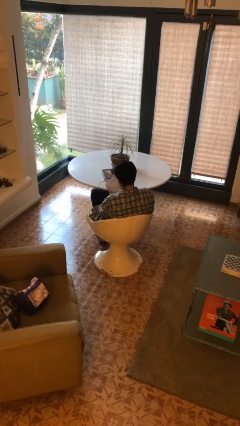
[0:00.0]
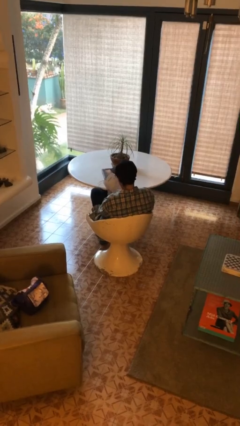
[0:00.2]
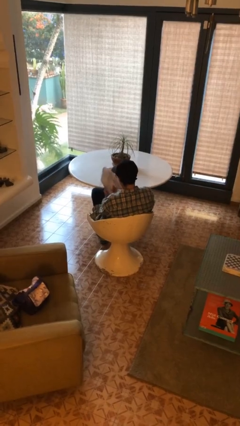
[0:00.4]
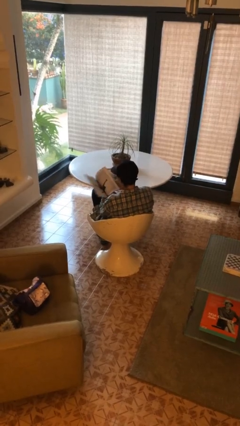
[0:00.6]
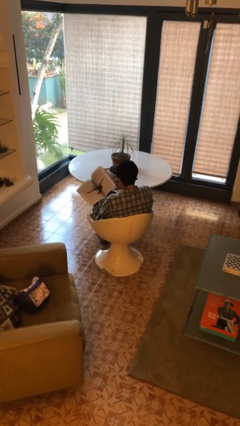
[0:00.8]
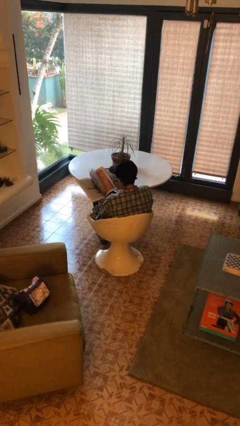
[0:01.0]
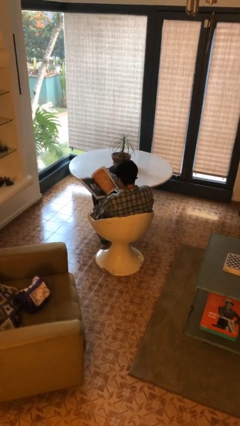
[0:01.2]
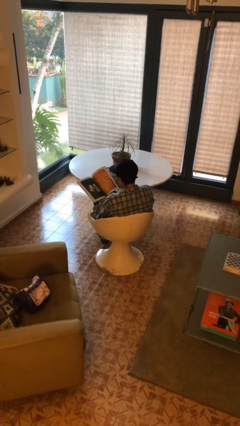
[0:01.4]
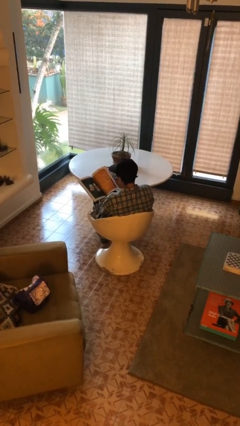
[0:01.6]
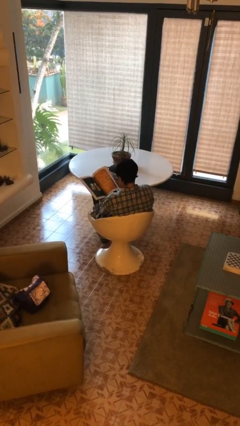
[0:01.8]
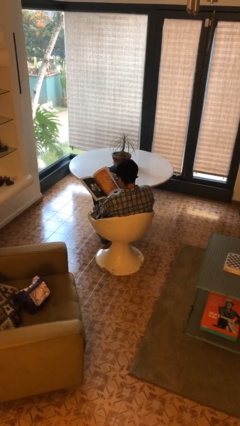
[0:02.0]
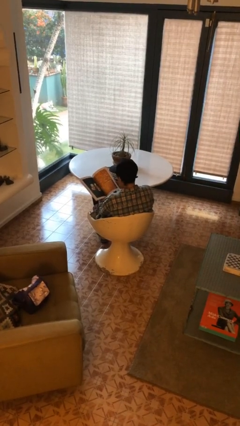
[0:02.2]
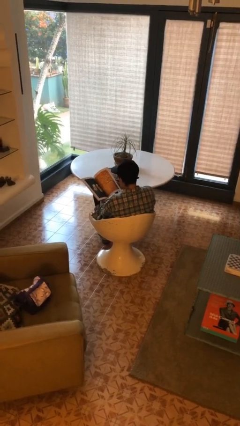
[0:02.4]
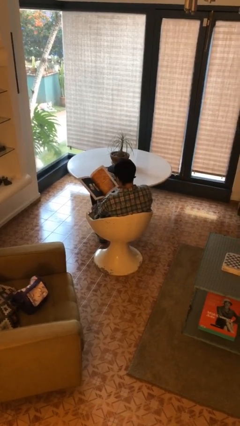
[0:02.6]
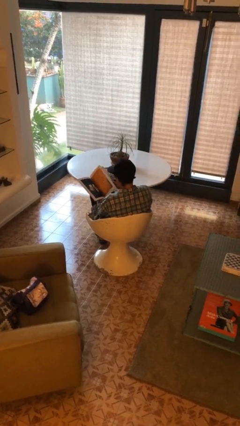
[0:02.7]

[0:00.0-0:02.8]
person reads magazine

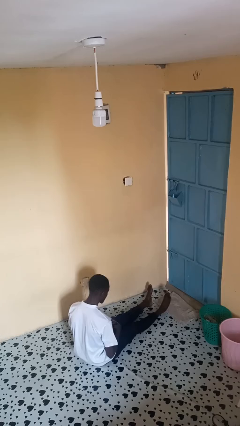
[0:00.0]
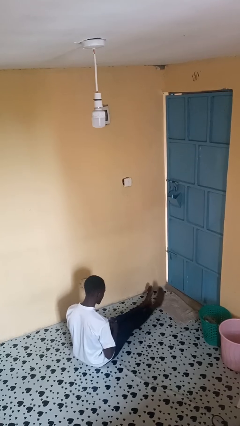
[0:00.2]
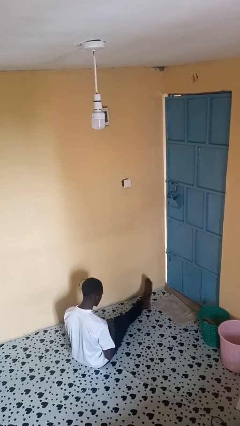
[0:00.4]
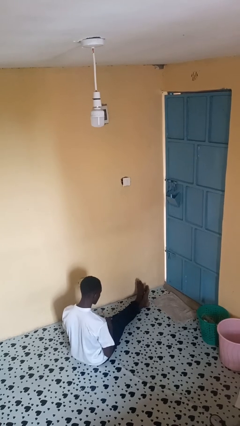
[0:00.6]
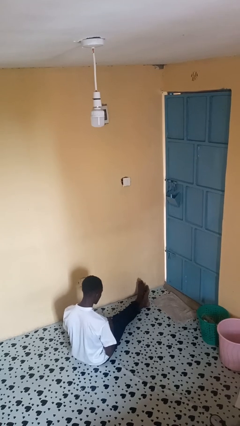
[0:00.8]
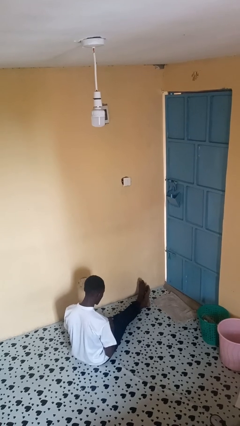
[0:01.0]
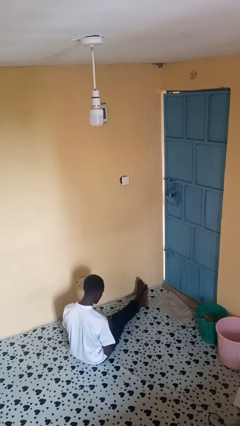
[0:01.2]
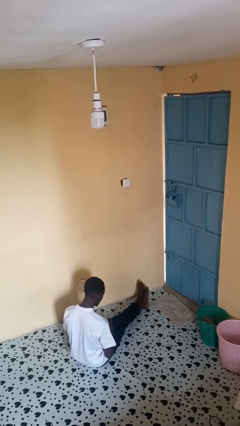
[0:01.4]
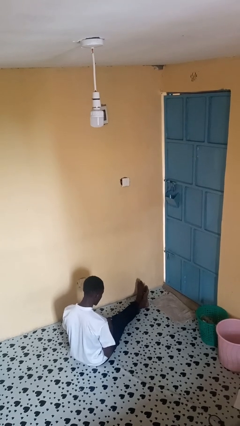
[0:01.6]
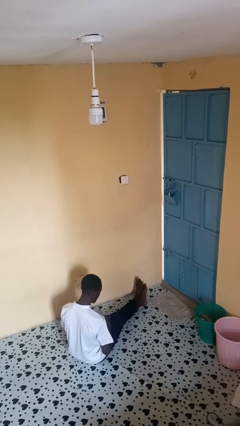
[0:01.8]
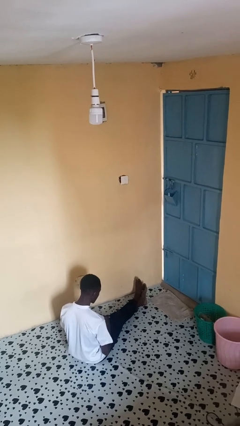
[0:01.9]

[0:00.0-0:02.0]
person crosses legs

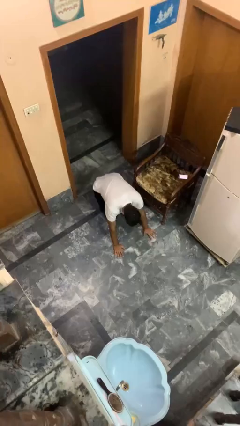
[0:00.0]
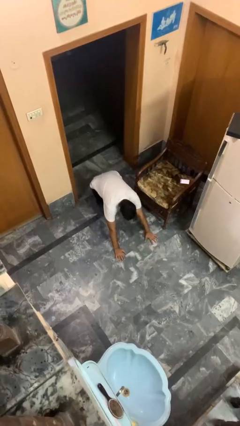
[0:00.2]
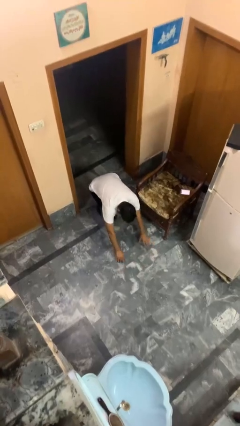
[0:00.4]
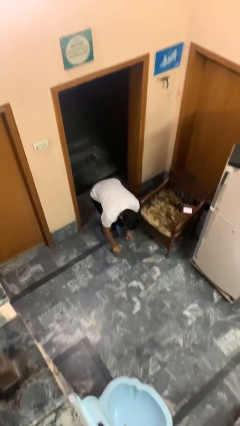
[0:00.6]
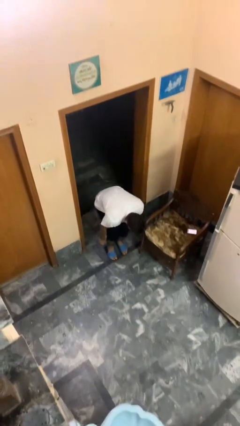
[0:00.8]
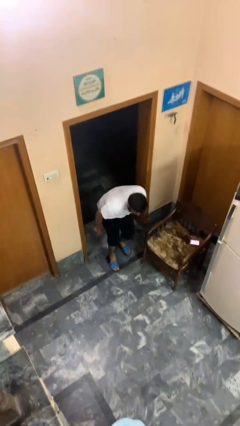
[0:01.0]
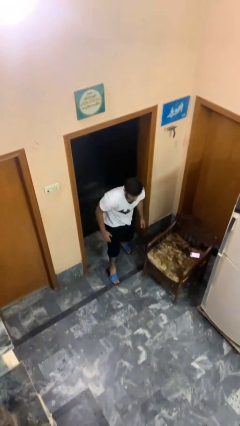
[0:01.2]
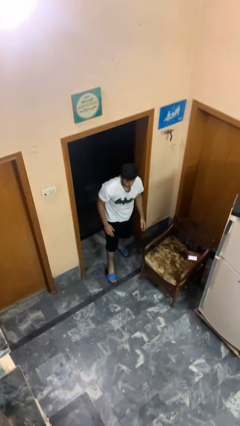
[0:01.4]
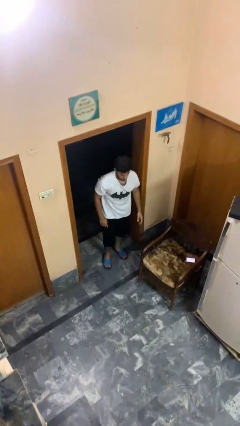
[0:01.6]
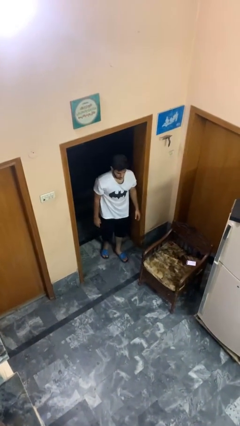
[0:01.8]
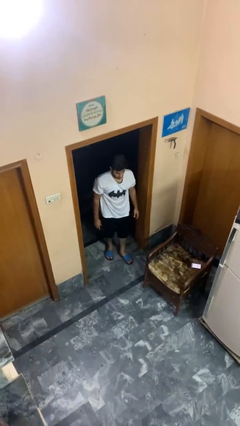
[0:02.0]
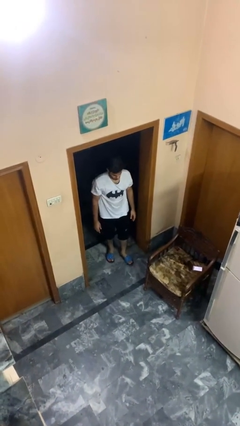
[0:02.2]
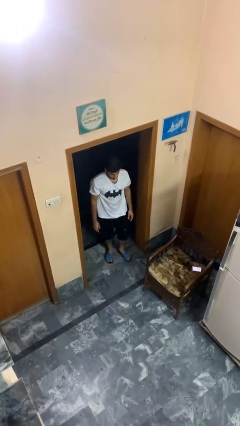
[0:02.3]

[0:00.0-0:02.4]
person stands up from floor

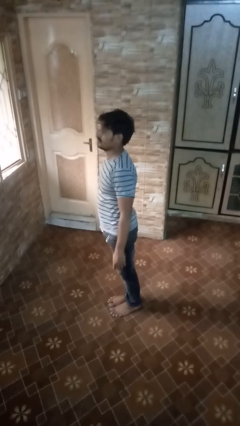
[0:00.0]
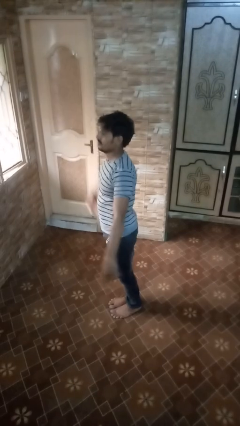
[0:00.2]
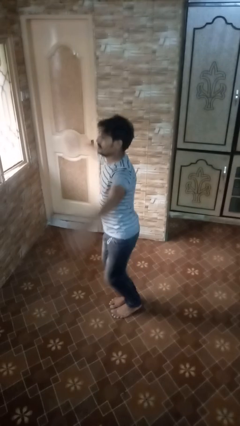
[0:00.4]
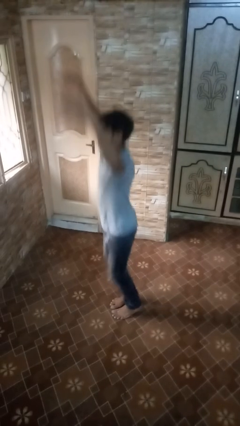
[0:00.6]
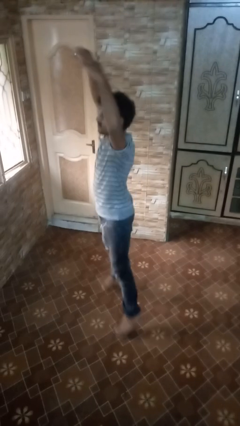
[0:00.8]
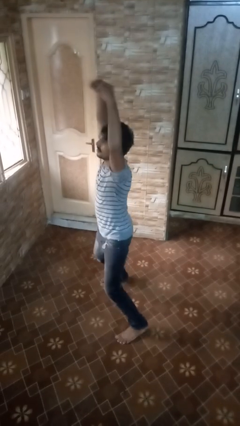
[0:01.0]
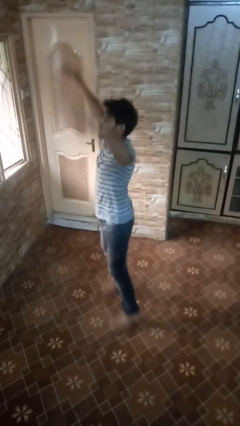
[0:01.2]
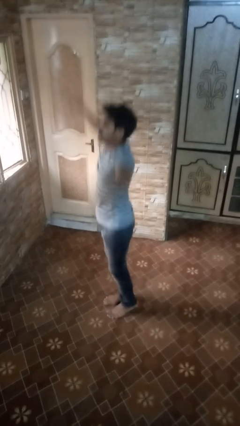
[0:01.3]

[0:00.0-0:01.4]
person exercises with jumping jacks

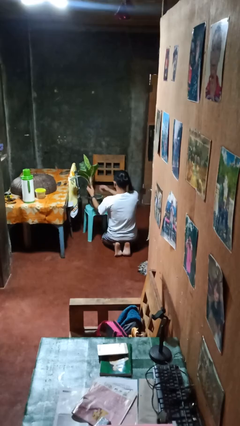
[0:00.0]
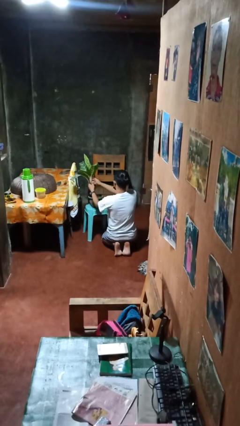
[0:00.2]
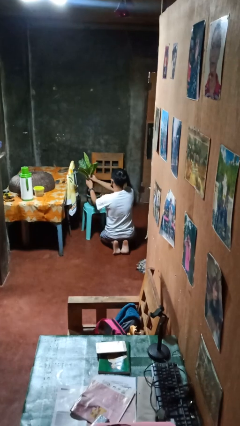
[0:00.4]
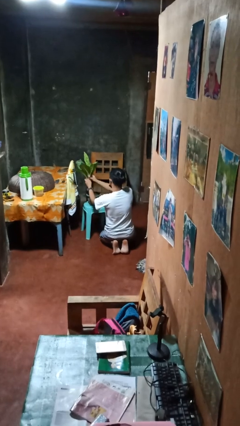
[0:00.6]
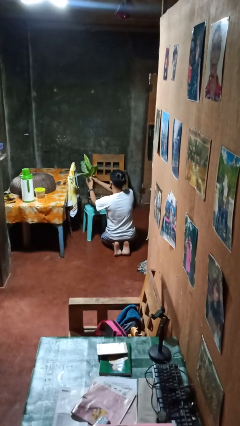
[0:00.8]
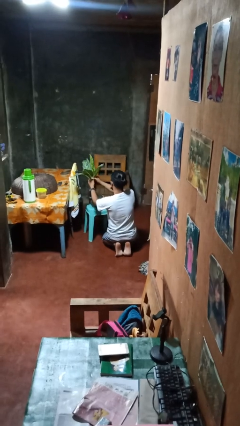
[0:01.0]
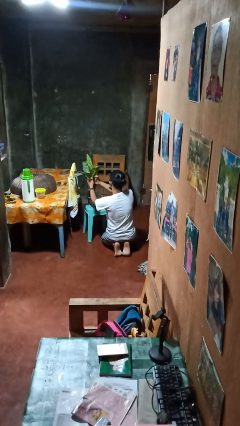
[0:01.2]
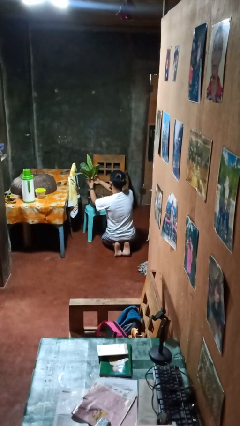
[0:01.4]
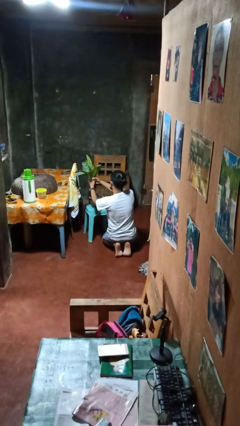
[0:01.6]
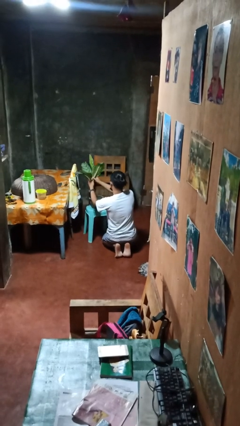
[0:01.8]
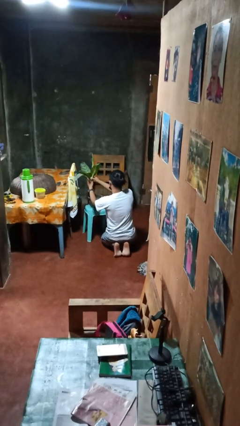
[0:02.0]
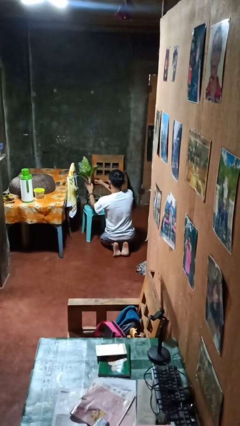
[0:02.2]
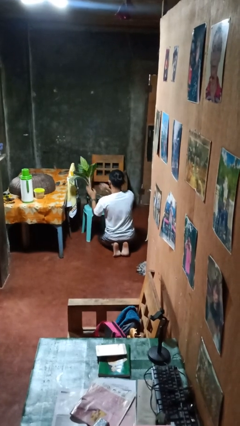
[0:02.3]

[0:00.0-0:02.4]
person arranges flowers in vase

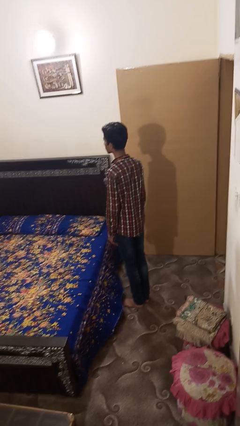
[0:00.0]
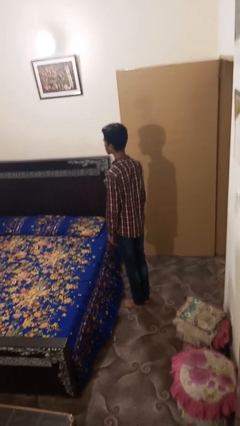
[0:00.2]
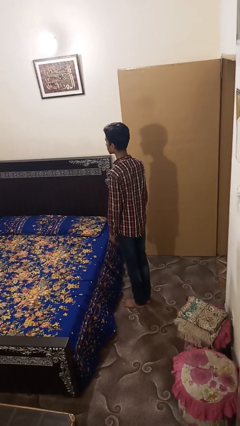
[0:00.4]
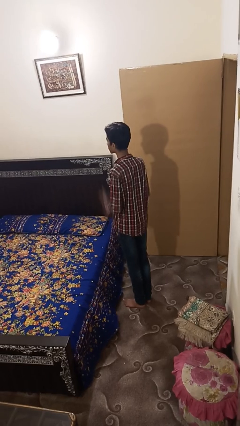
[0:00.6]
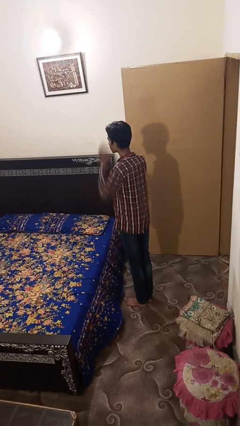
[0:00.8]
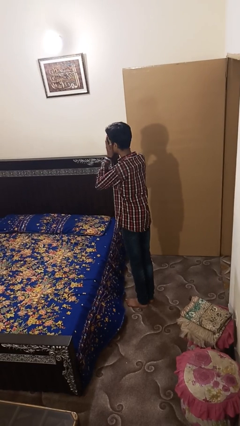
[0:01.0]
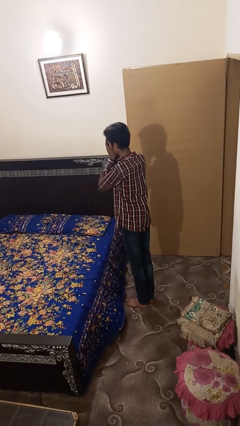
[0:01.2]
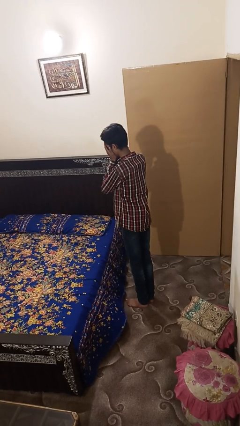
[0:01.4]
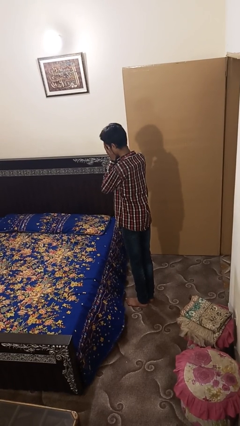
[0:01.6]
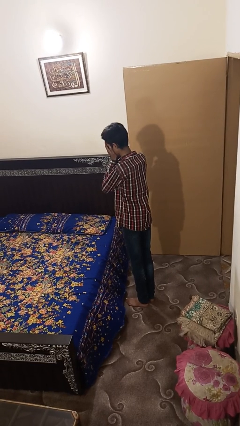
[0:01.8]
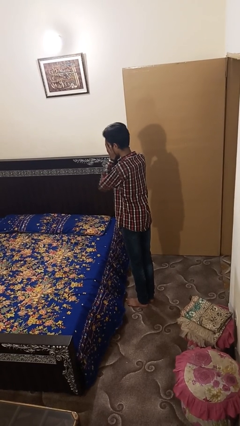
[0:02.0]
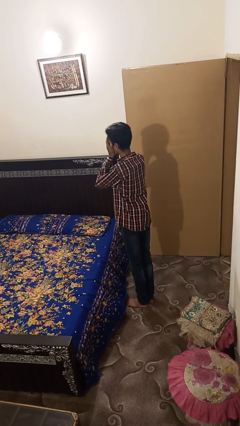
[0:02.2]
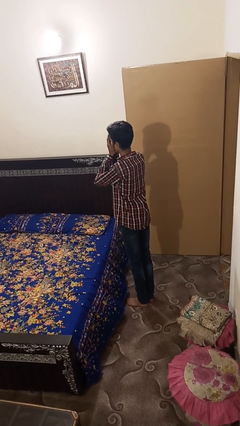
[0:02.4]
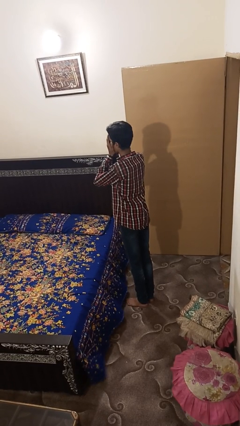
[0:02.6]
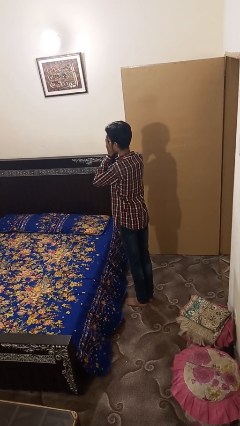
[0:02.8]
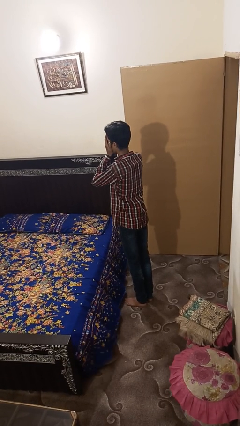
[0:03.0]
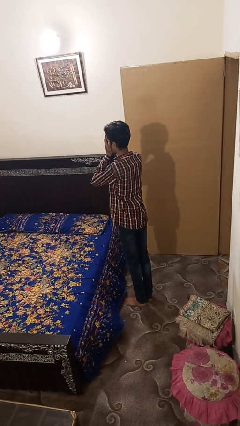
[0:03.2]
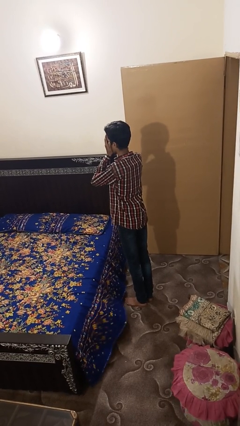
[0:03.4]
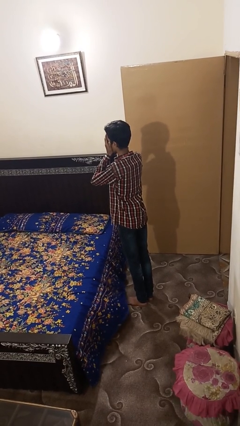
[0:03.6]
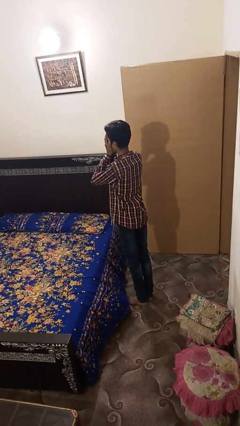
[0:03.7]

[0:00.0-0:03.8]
person covers face with hands

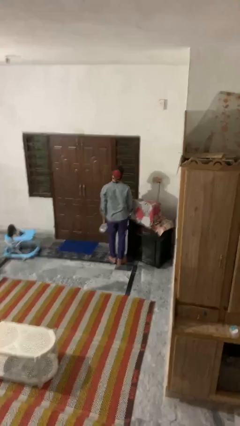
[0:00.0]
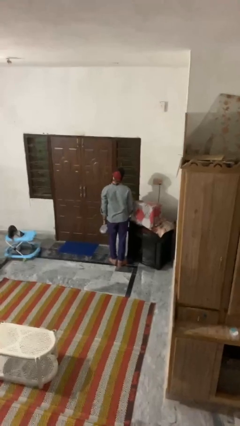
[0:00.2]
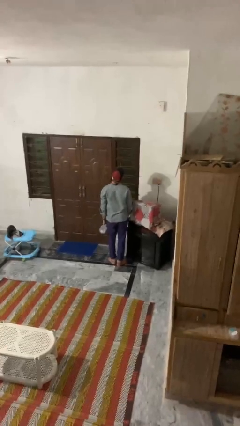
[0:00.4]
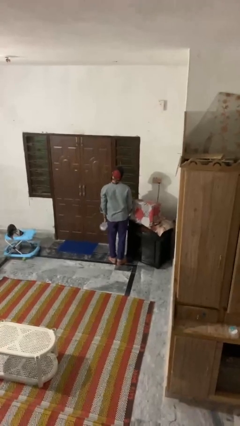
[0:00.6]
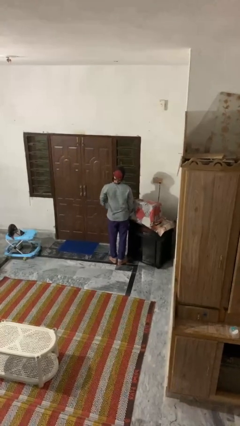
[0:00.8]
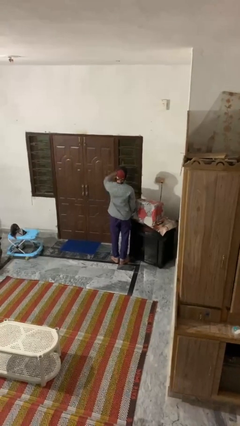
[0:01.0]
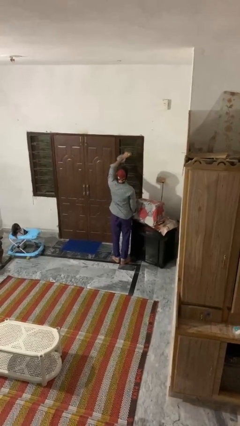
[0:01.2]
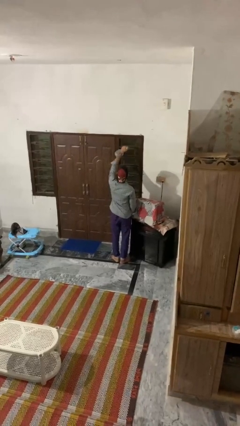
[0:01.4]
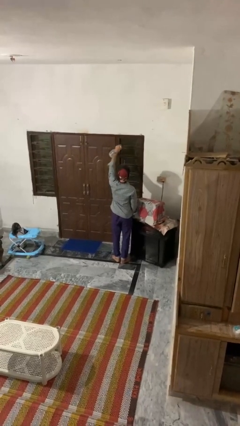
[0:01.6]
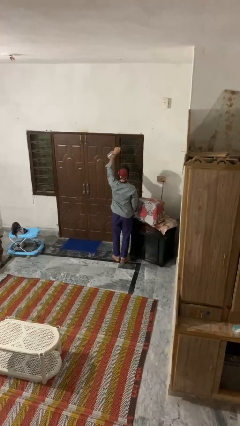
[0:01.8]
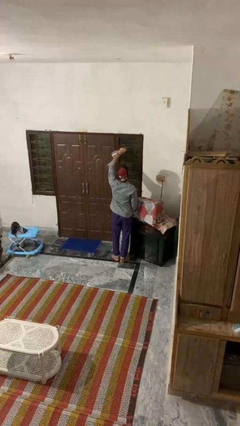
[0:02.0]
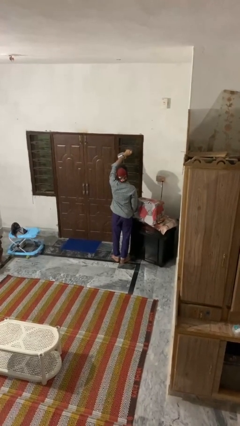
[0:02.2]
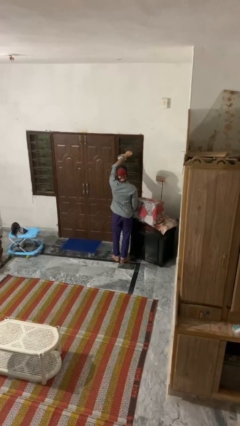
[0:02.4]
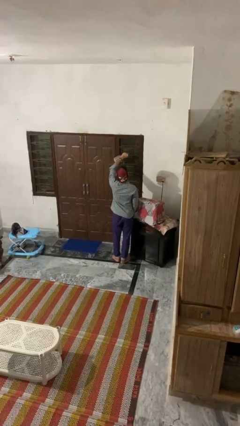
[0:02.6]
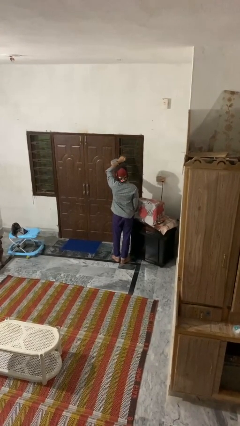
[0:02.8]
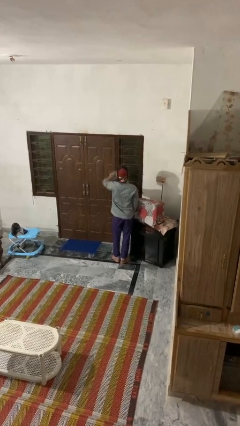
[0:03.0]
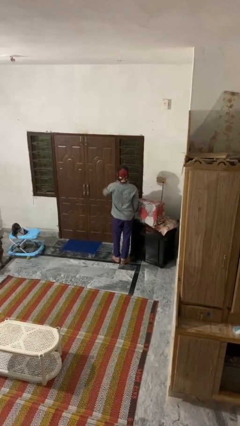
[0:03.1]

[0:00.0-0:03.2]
person sprays from bottle
